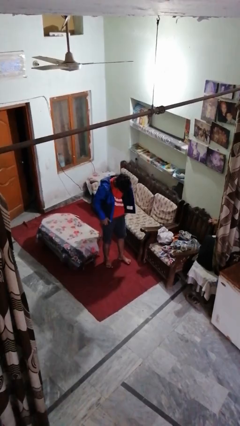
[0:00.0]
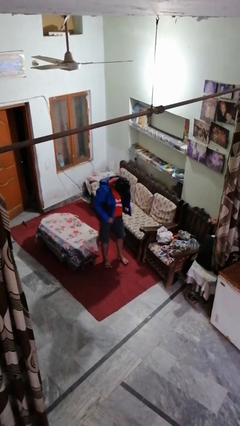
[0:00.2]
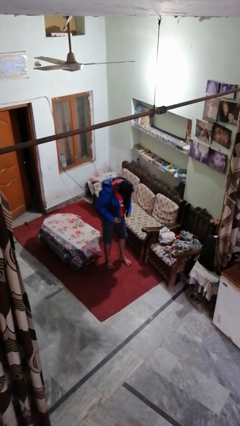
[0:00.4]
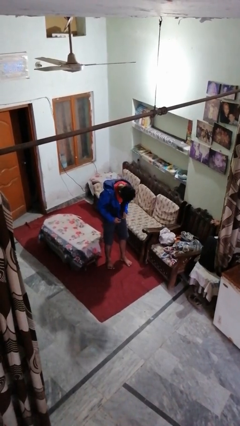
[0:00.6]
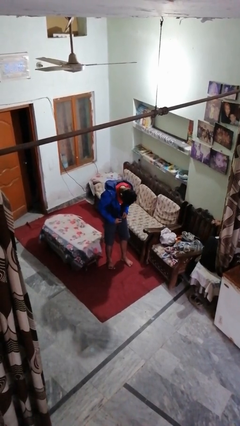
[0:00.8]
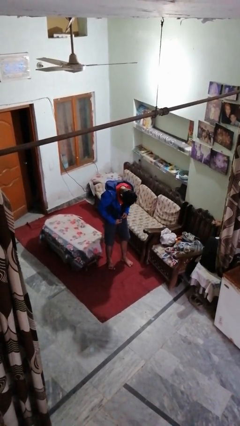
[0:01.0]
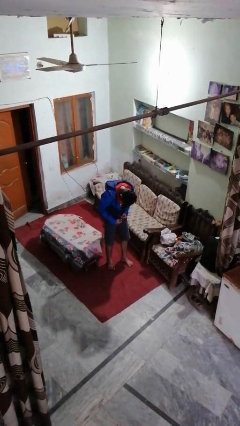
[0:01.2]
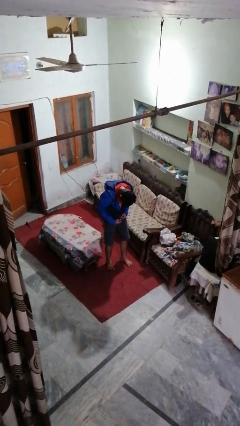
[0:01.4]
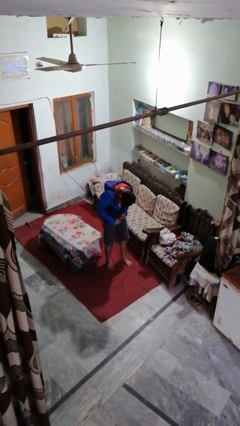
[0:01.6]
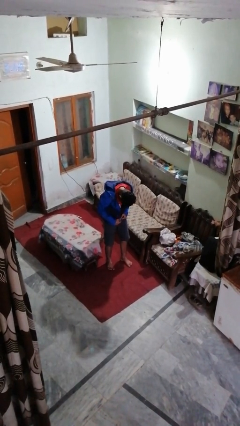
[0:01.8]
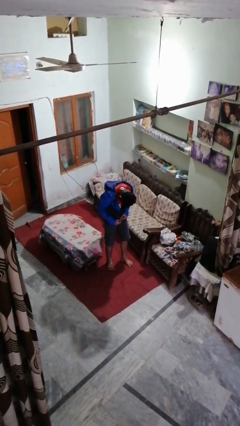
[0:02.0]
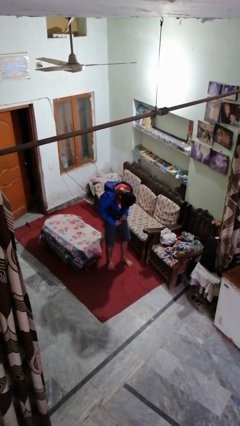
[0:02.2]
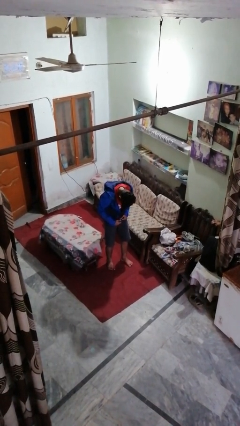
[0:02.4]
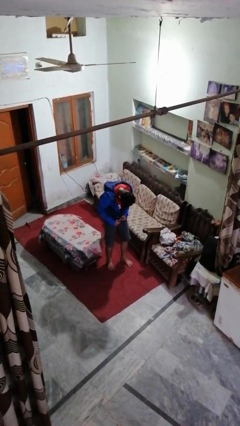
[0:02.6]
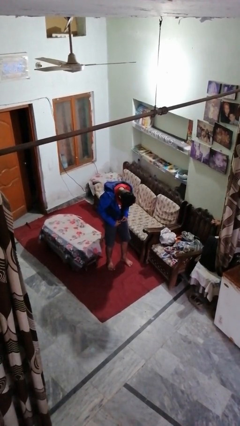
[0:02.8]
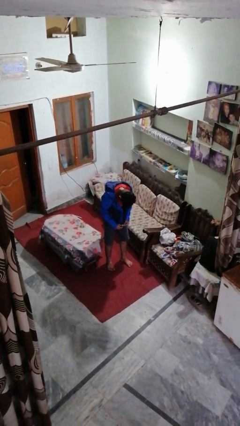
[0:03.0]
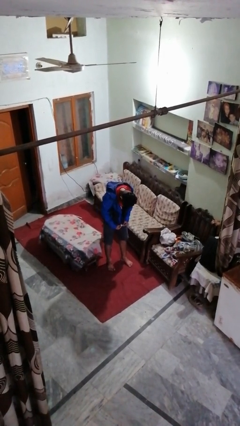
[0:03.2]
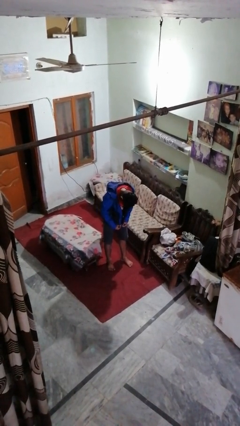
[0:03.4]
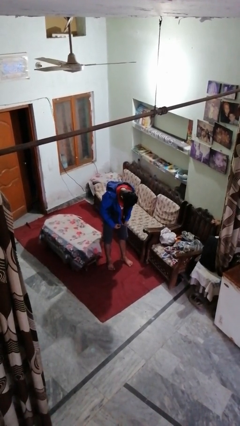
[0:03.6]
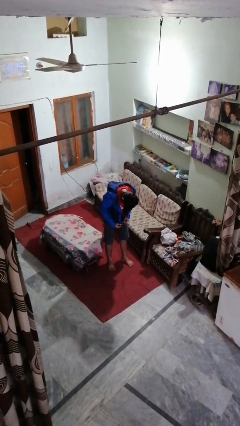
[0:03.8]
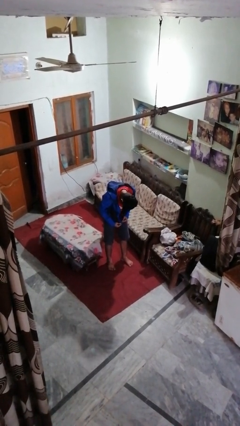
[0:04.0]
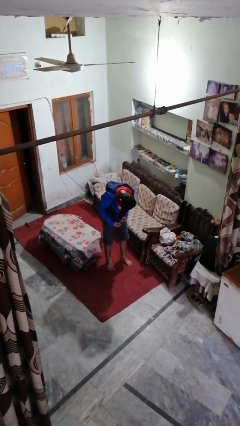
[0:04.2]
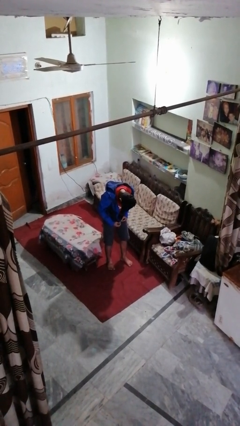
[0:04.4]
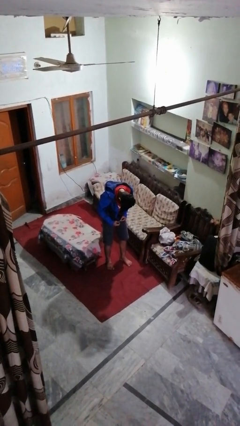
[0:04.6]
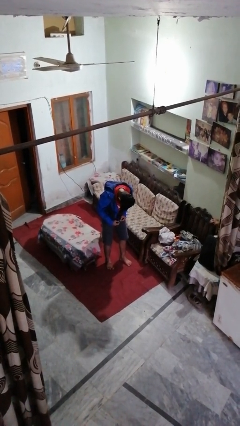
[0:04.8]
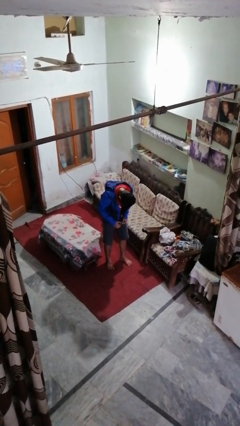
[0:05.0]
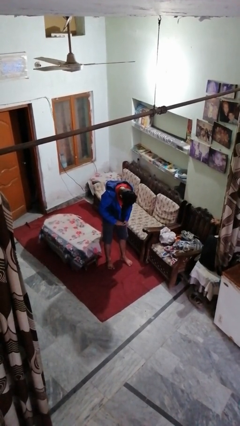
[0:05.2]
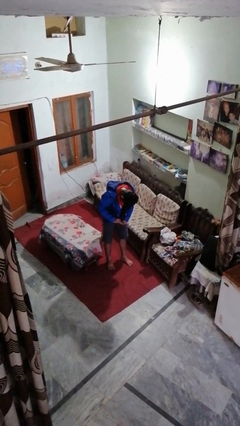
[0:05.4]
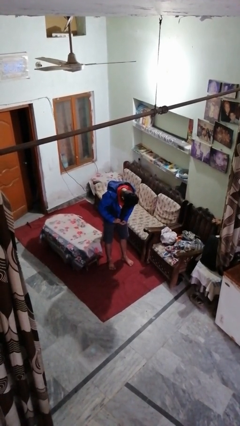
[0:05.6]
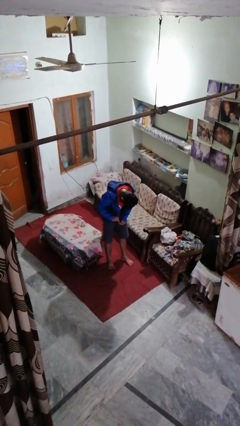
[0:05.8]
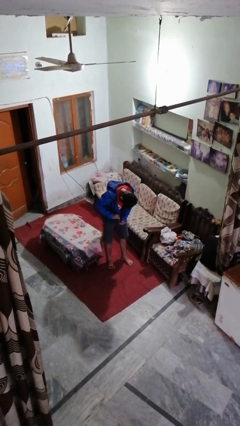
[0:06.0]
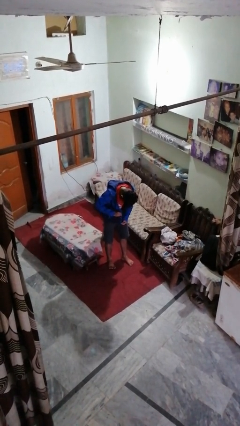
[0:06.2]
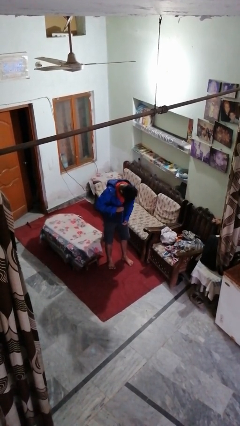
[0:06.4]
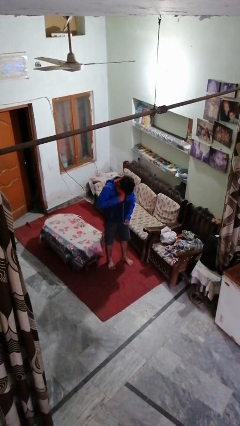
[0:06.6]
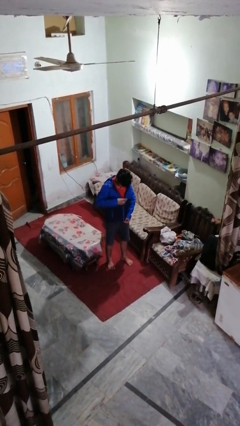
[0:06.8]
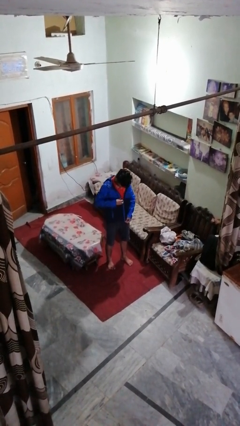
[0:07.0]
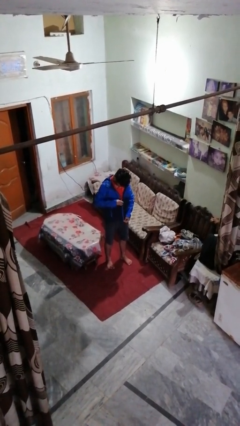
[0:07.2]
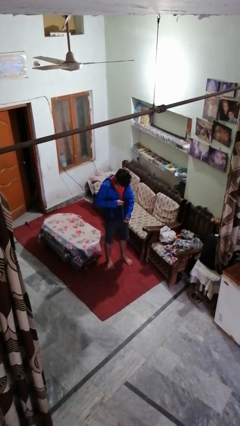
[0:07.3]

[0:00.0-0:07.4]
person zips up jacket

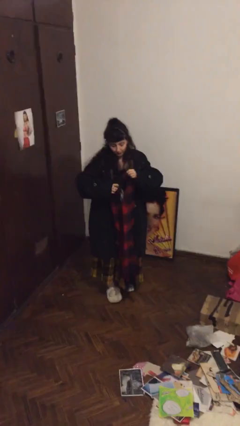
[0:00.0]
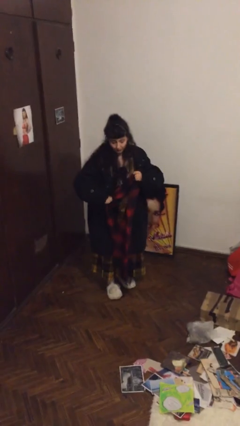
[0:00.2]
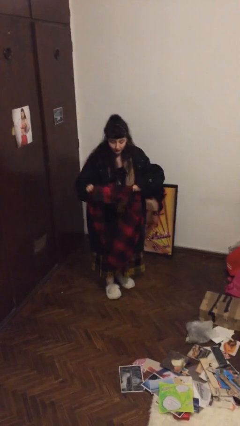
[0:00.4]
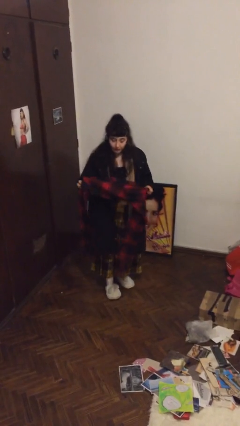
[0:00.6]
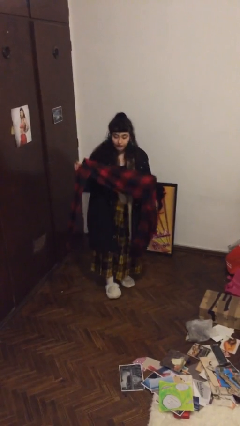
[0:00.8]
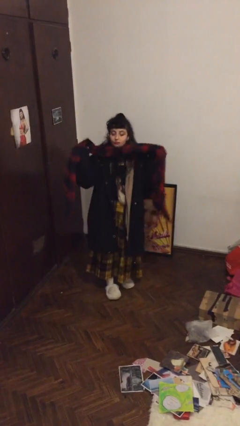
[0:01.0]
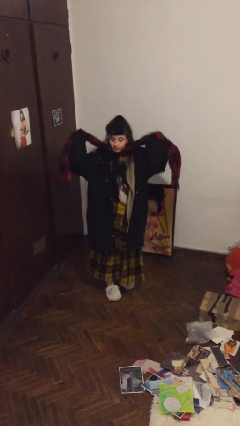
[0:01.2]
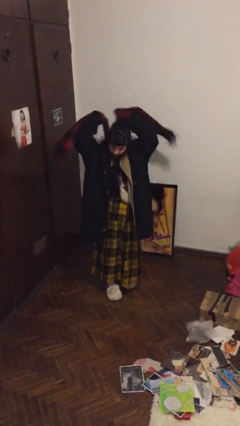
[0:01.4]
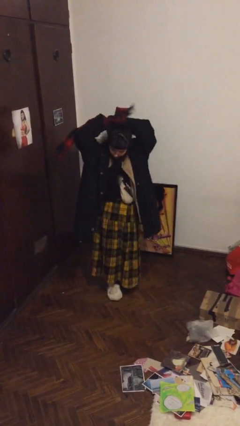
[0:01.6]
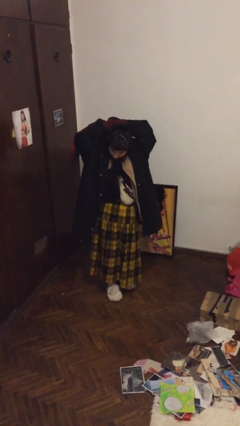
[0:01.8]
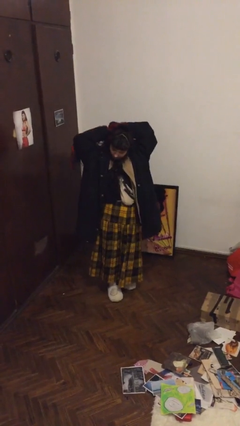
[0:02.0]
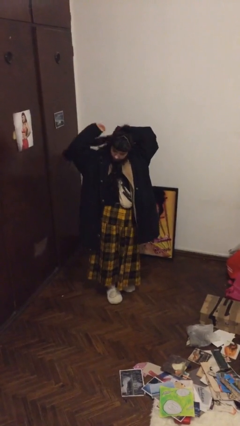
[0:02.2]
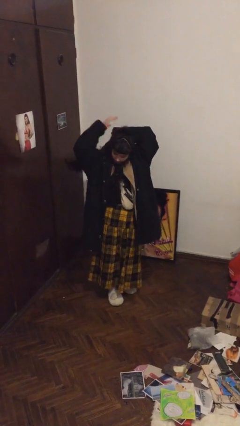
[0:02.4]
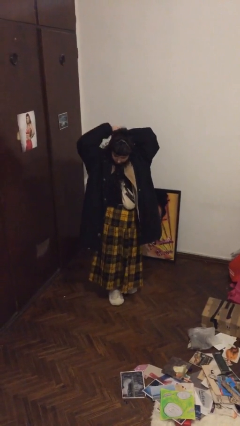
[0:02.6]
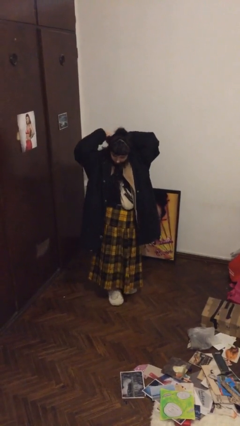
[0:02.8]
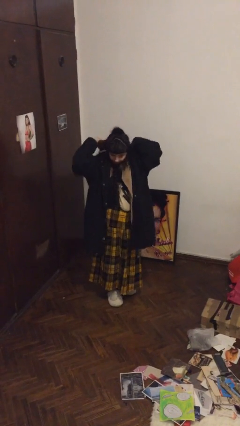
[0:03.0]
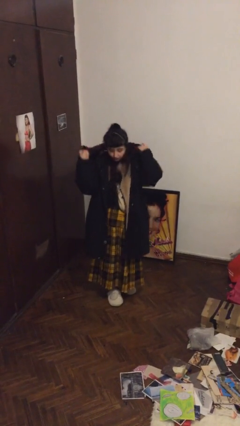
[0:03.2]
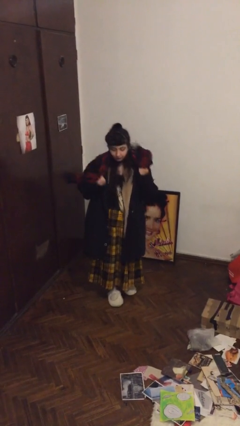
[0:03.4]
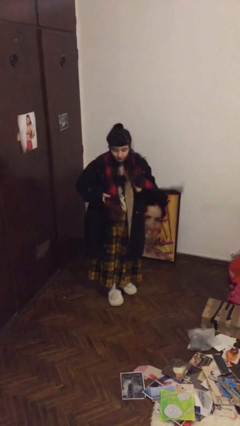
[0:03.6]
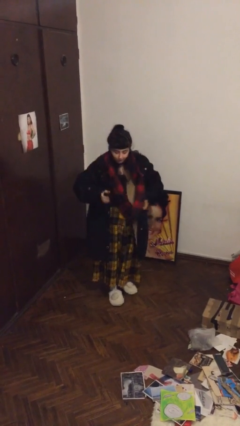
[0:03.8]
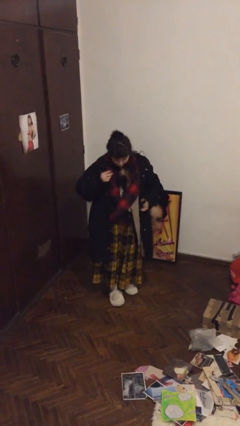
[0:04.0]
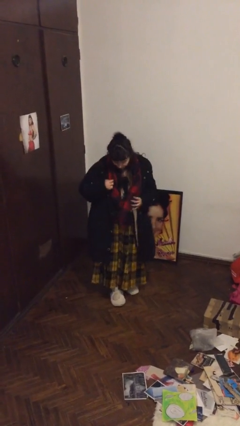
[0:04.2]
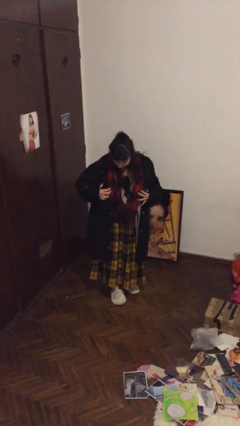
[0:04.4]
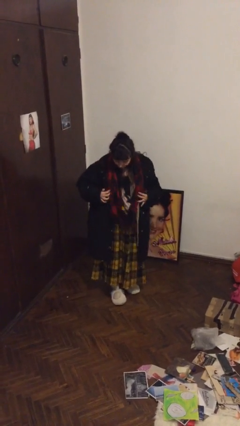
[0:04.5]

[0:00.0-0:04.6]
person puts on scarf

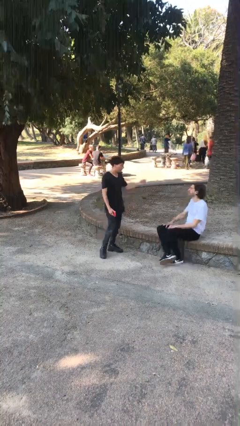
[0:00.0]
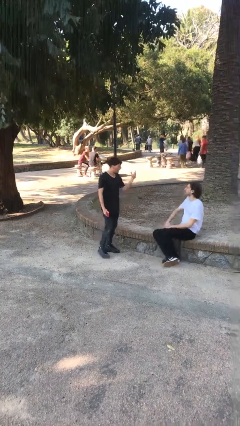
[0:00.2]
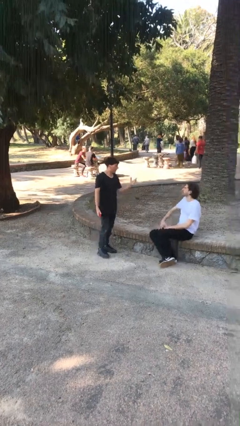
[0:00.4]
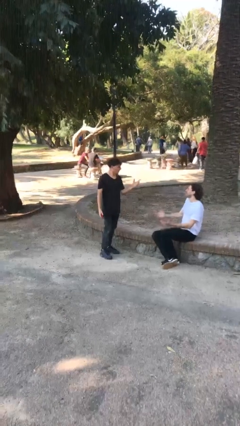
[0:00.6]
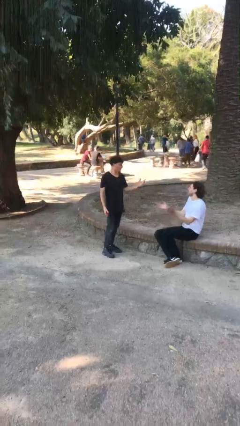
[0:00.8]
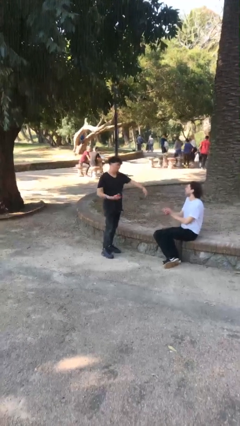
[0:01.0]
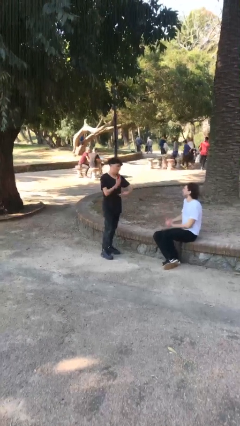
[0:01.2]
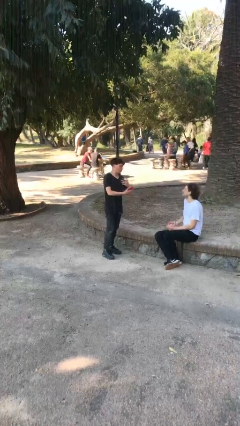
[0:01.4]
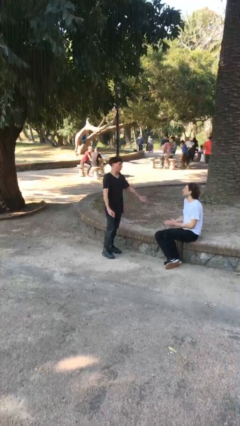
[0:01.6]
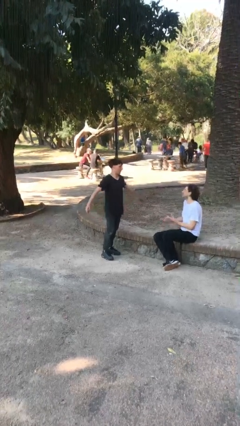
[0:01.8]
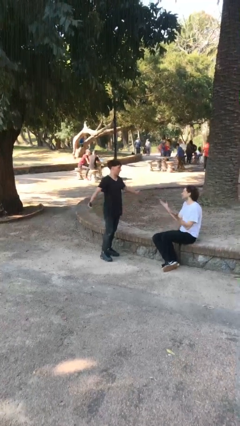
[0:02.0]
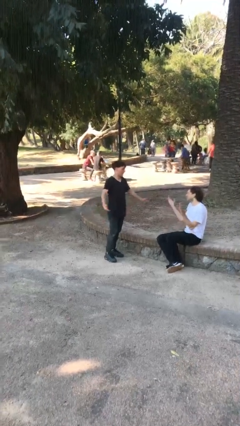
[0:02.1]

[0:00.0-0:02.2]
person talks to person

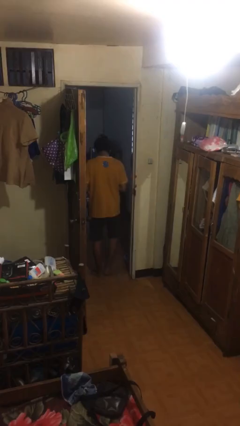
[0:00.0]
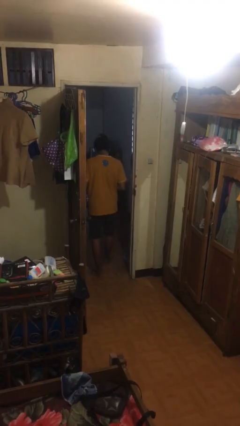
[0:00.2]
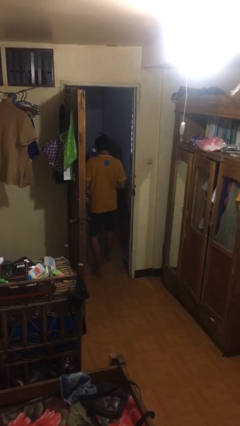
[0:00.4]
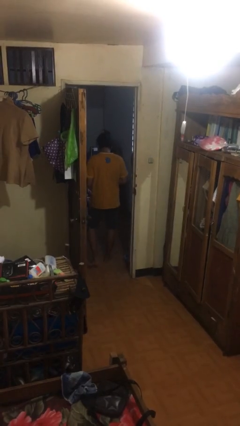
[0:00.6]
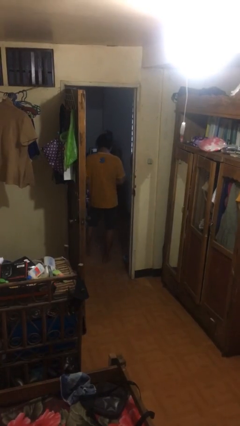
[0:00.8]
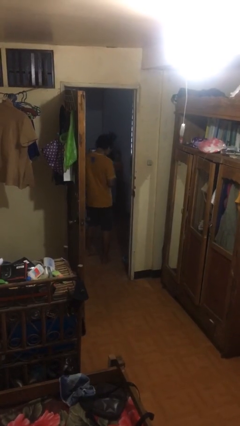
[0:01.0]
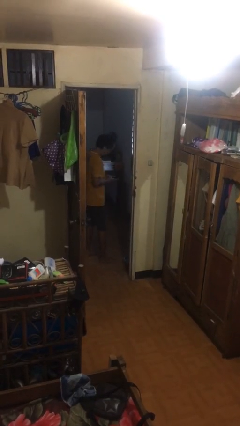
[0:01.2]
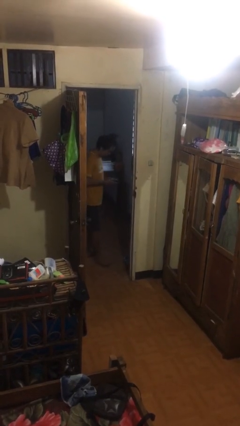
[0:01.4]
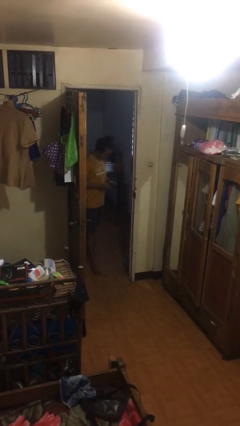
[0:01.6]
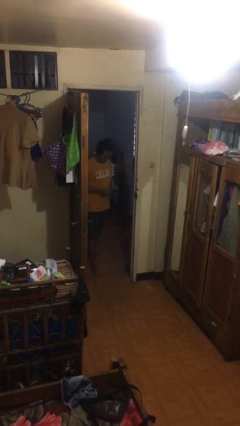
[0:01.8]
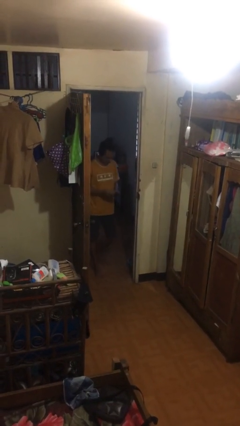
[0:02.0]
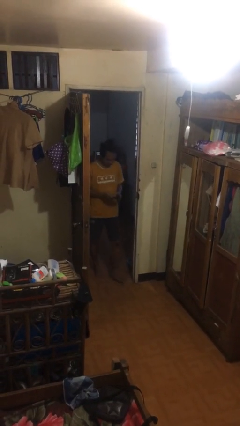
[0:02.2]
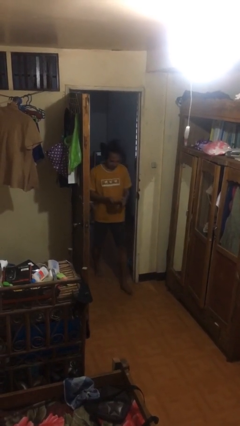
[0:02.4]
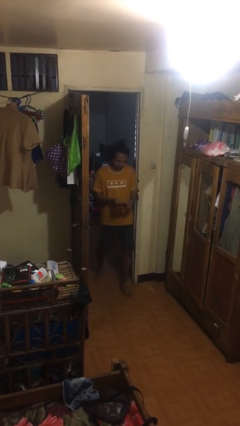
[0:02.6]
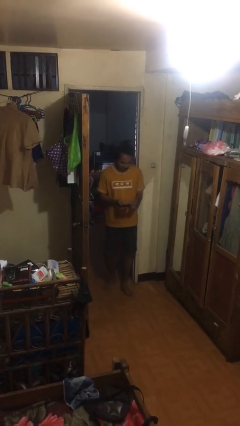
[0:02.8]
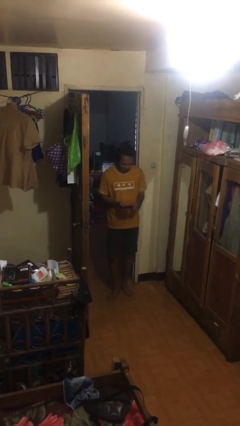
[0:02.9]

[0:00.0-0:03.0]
person enters scene through structure

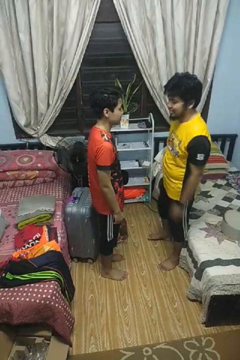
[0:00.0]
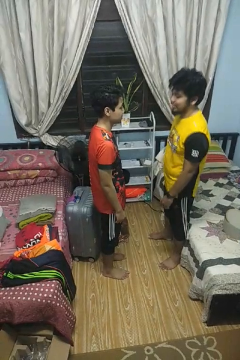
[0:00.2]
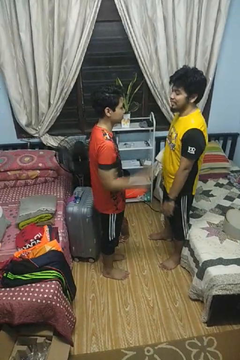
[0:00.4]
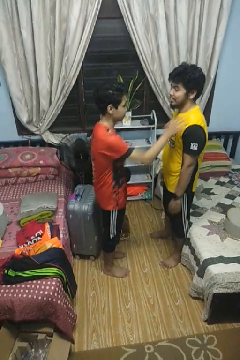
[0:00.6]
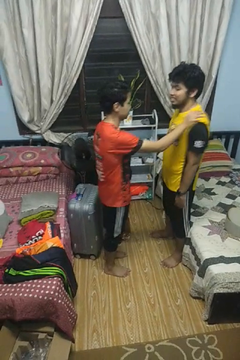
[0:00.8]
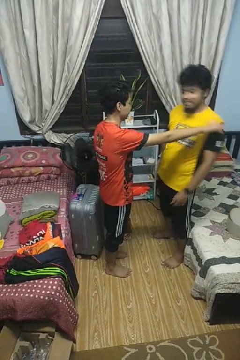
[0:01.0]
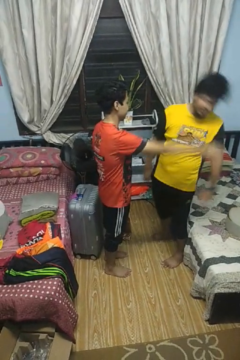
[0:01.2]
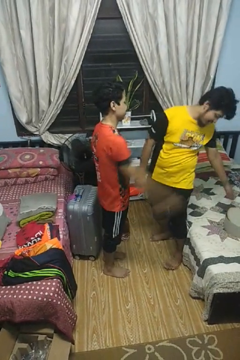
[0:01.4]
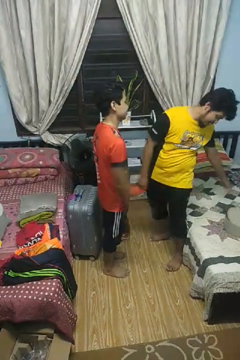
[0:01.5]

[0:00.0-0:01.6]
person shoves person
